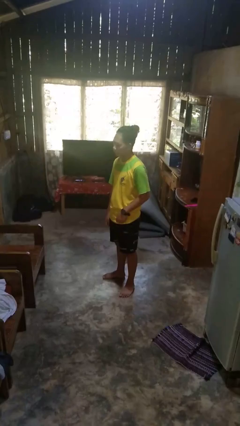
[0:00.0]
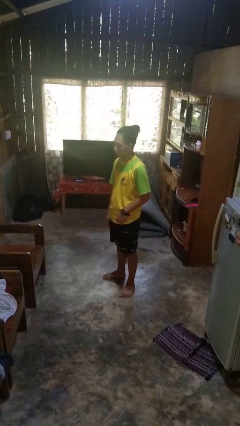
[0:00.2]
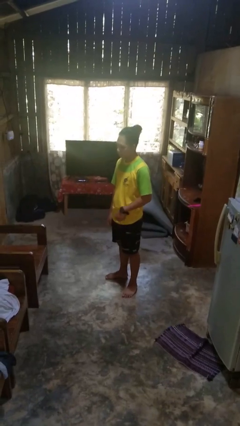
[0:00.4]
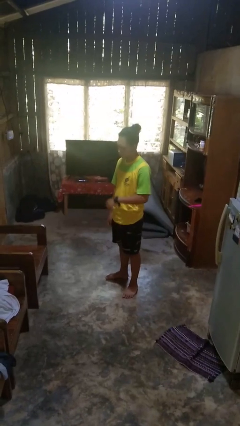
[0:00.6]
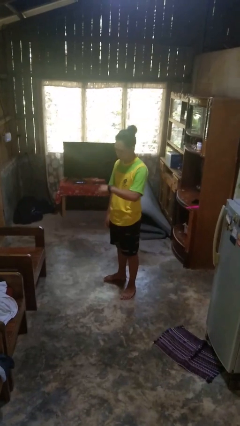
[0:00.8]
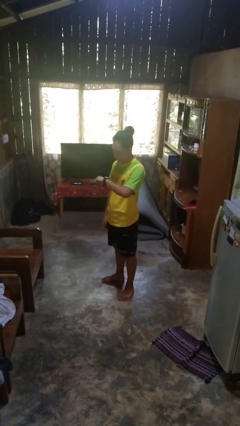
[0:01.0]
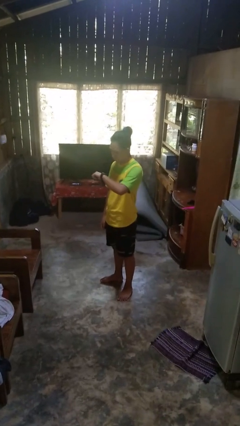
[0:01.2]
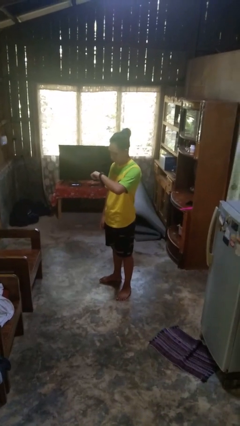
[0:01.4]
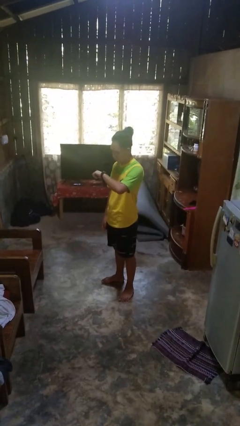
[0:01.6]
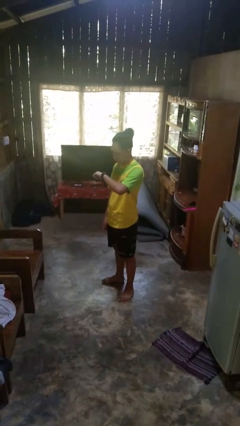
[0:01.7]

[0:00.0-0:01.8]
person looks at wristwatch

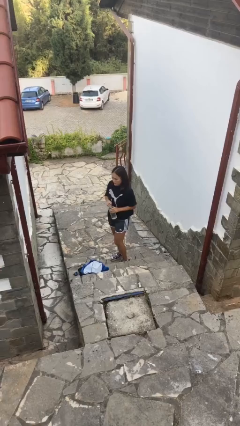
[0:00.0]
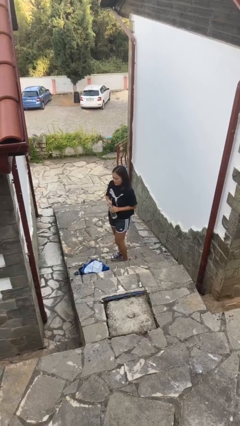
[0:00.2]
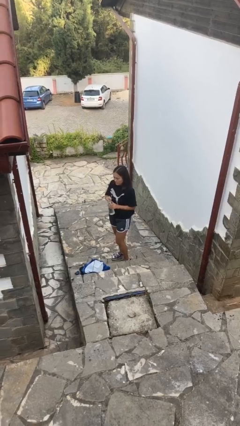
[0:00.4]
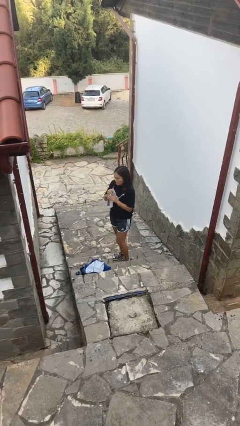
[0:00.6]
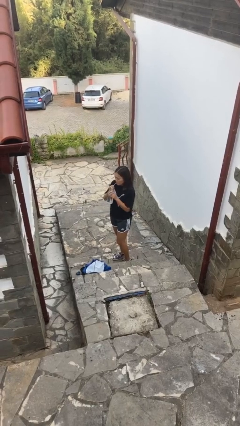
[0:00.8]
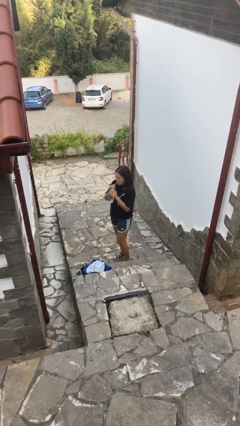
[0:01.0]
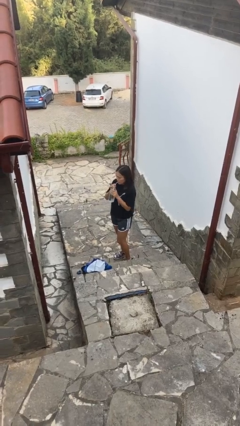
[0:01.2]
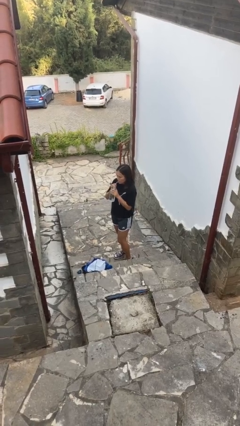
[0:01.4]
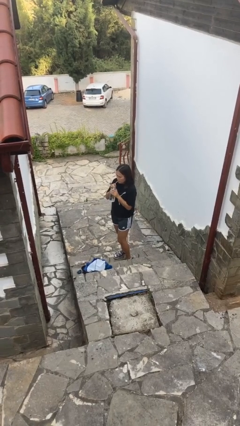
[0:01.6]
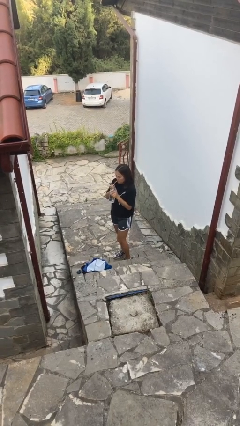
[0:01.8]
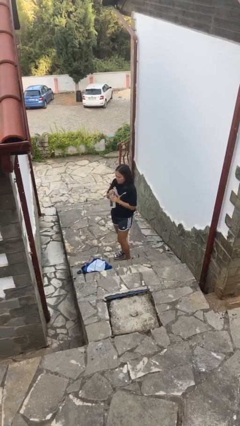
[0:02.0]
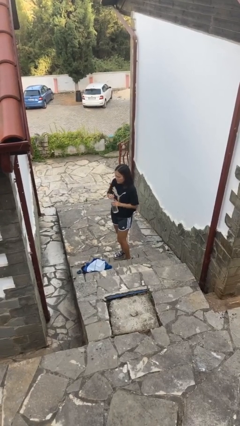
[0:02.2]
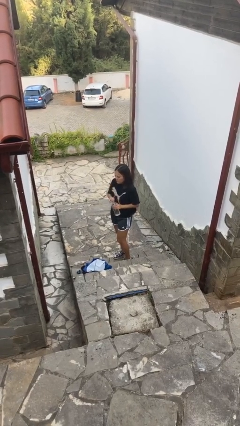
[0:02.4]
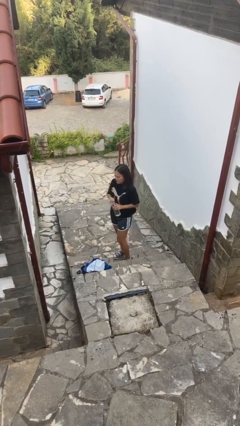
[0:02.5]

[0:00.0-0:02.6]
person drinks from straw

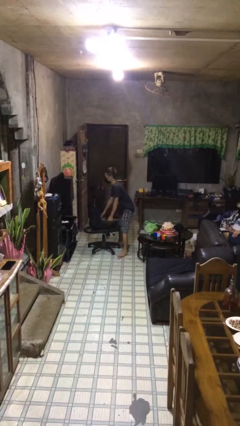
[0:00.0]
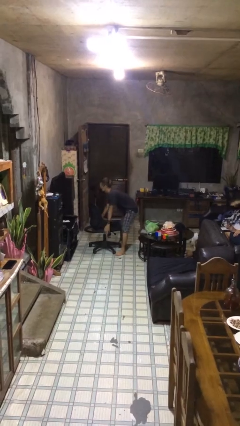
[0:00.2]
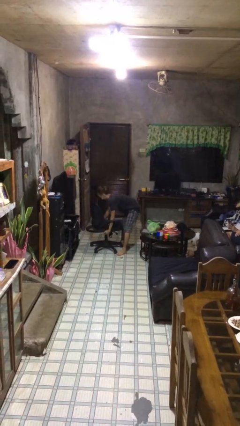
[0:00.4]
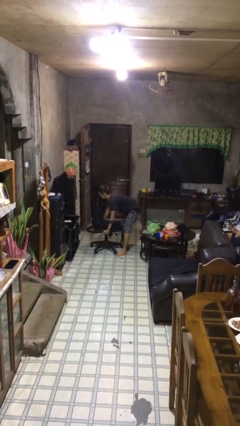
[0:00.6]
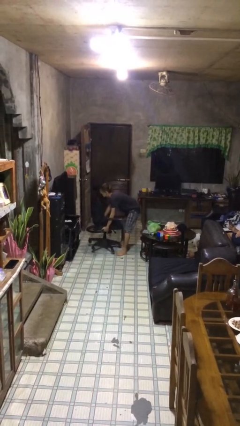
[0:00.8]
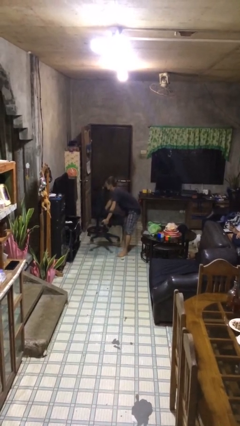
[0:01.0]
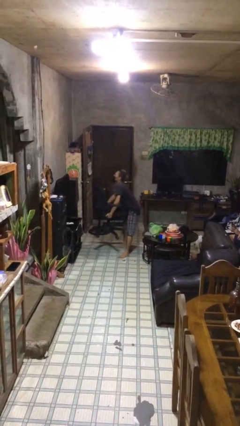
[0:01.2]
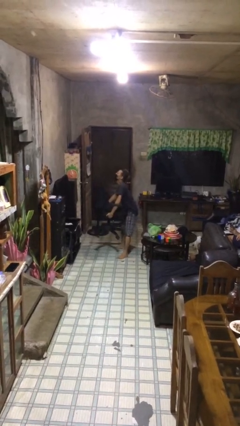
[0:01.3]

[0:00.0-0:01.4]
person picks up object from floor

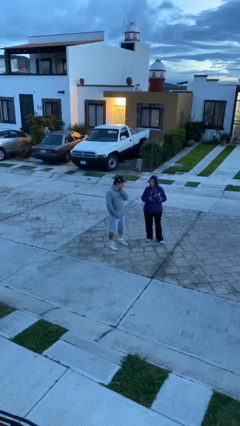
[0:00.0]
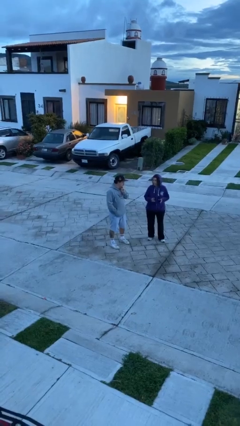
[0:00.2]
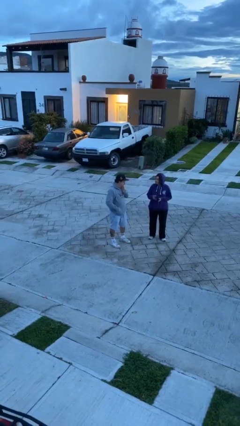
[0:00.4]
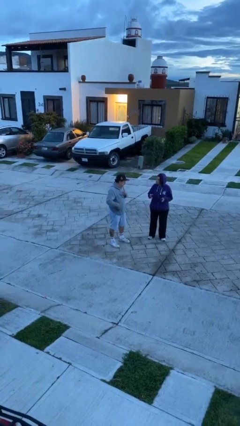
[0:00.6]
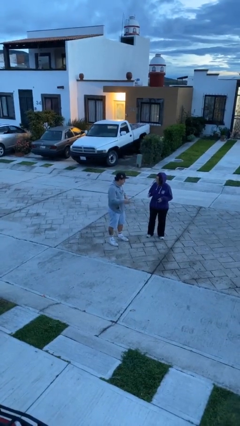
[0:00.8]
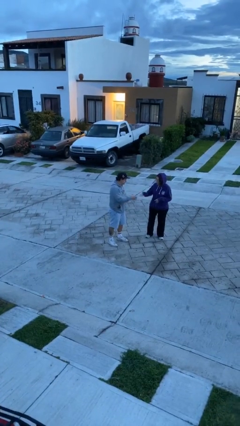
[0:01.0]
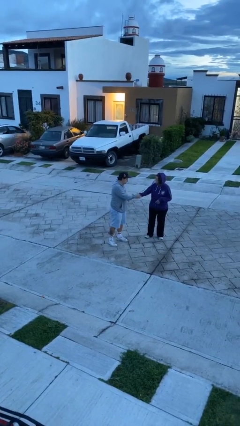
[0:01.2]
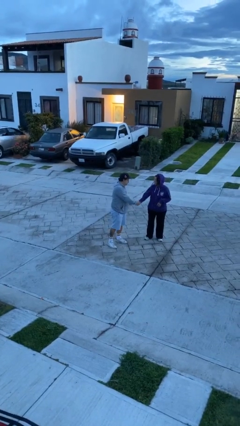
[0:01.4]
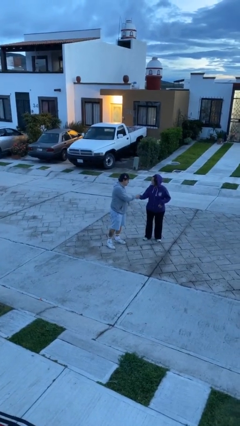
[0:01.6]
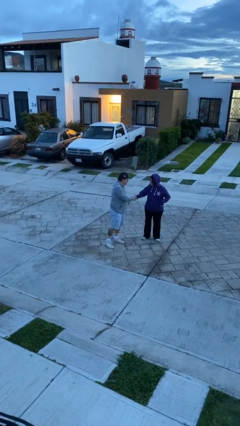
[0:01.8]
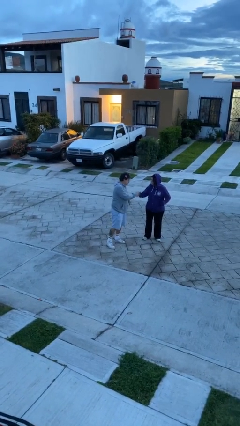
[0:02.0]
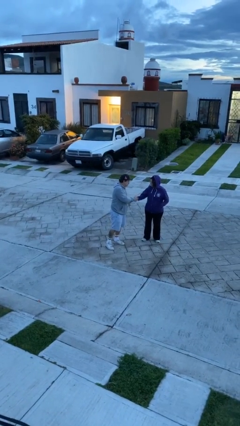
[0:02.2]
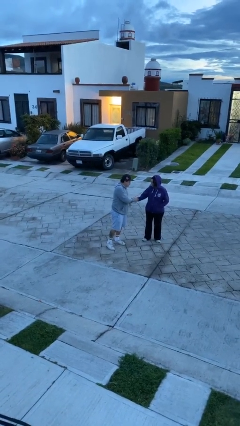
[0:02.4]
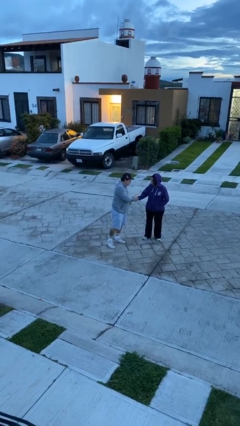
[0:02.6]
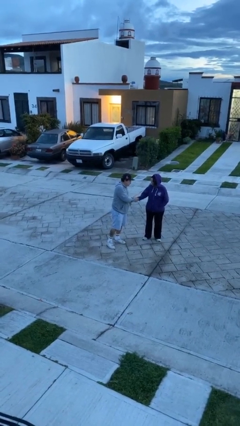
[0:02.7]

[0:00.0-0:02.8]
person shakes hand

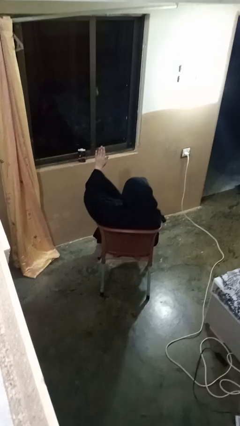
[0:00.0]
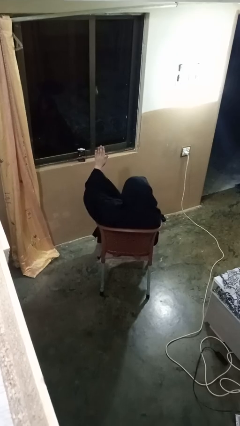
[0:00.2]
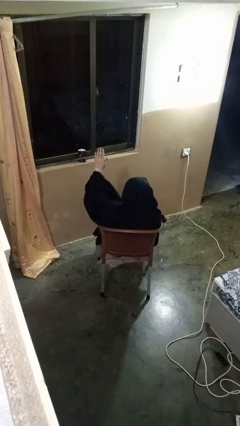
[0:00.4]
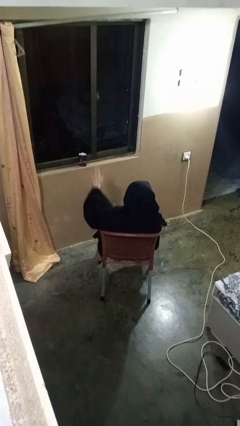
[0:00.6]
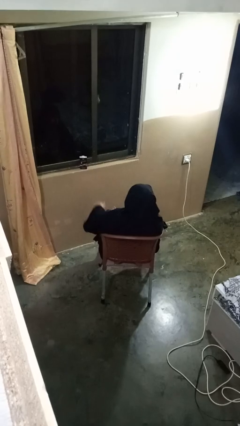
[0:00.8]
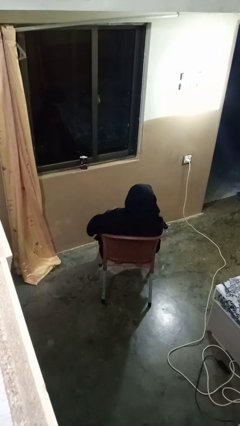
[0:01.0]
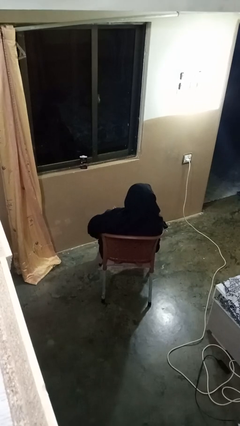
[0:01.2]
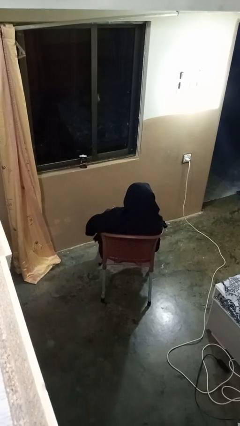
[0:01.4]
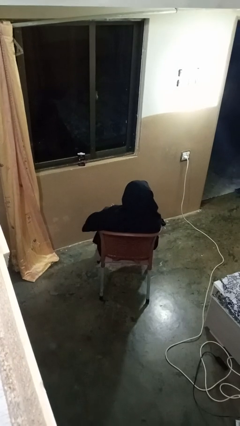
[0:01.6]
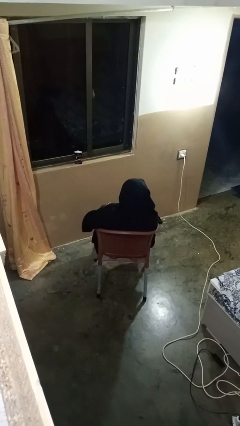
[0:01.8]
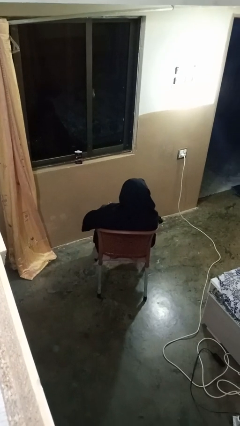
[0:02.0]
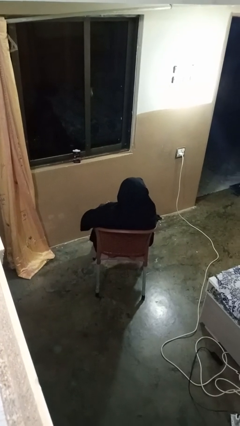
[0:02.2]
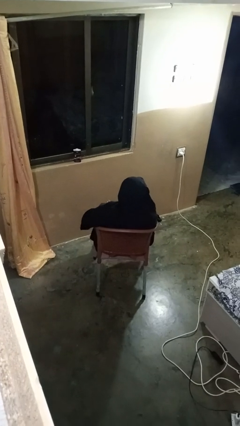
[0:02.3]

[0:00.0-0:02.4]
person gestures lower hand

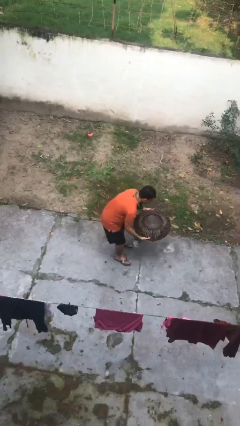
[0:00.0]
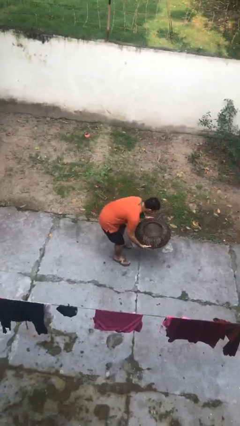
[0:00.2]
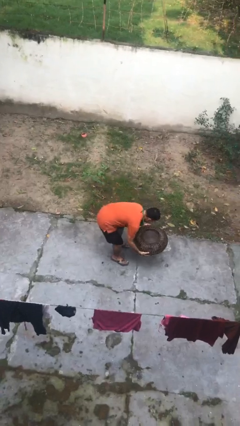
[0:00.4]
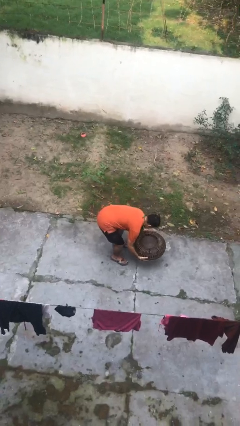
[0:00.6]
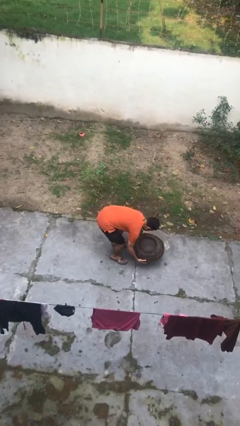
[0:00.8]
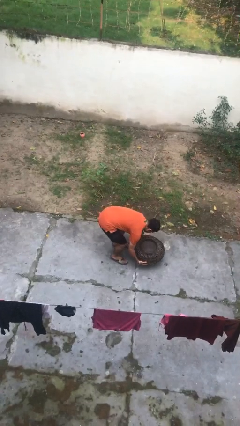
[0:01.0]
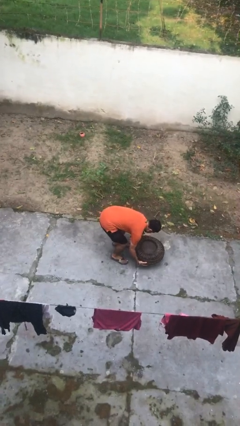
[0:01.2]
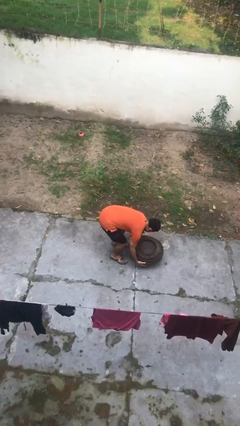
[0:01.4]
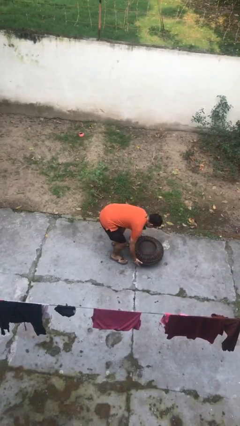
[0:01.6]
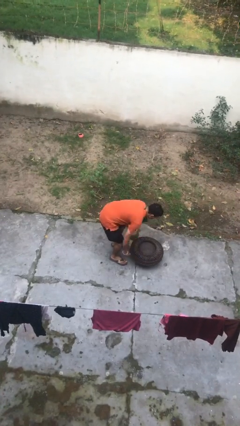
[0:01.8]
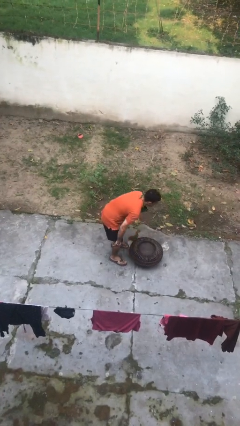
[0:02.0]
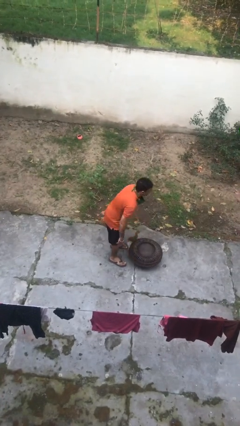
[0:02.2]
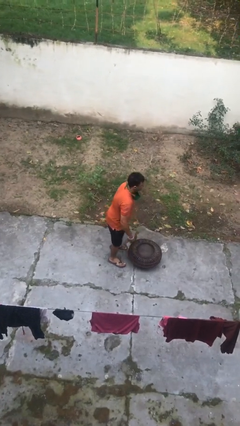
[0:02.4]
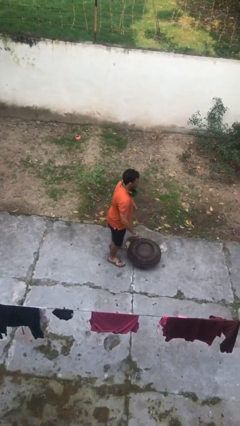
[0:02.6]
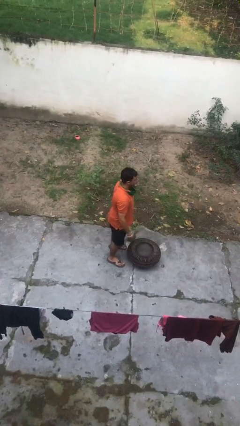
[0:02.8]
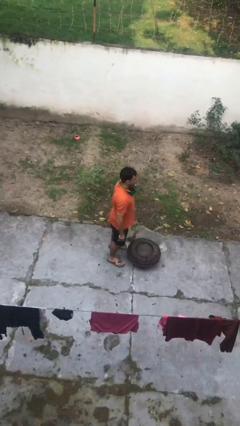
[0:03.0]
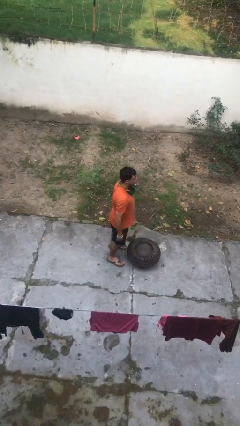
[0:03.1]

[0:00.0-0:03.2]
person puts down object on floor

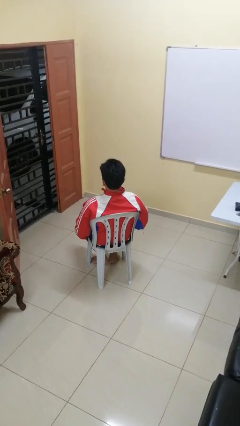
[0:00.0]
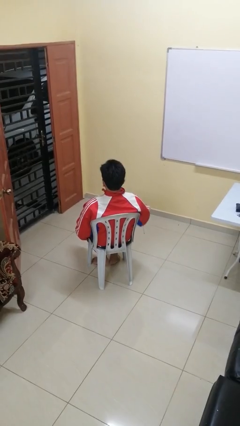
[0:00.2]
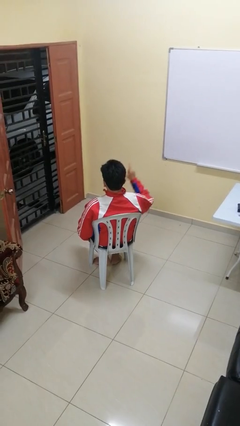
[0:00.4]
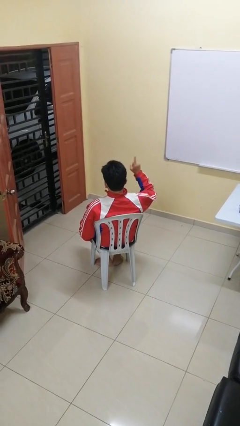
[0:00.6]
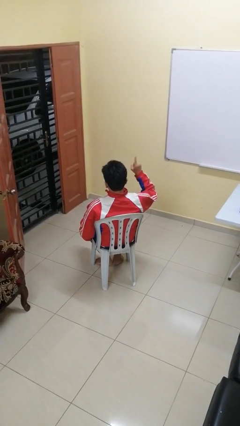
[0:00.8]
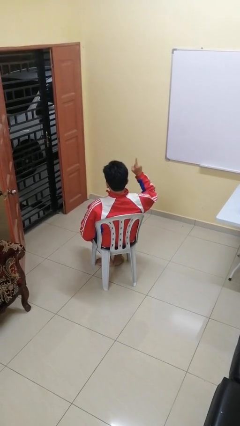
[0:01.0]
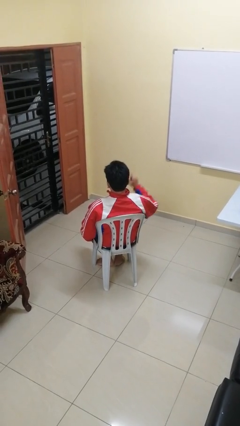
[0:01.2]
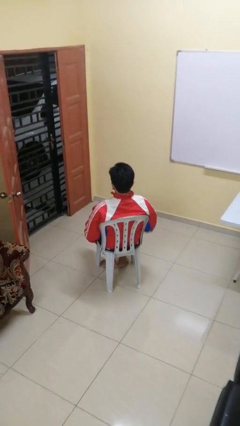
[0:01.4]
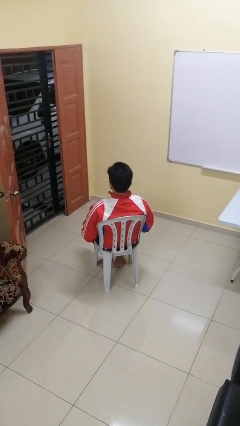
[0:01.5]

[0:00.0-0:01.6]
person gestures number one

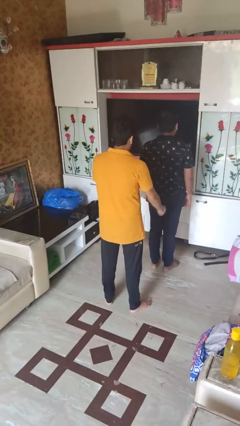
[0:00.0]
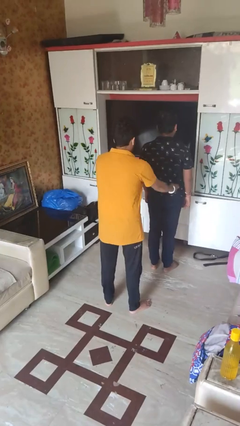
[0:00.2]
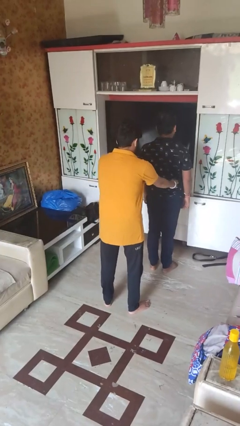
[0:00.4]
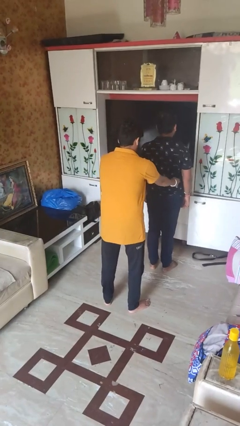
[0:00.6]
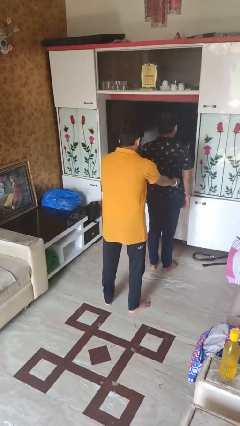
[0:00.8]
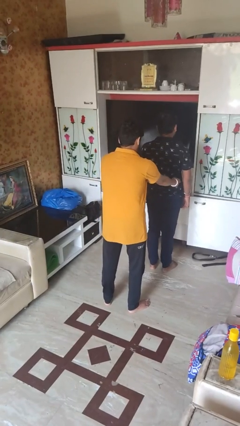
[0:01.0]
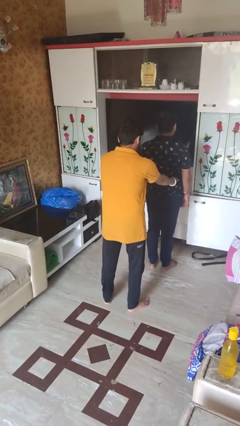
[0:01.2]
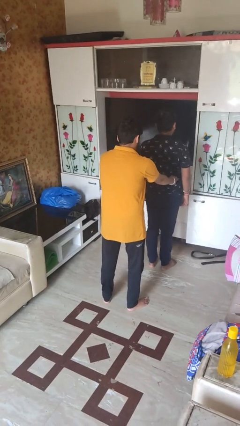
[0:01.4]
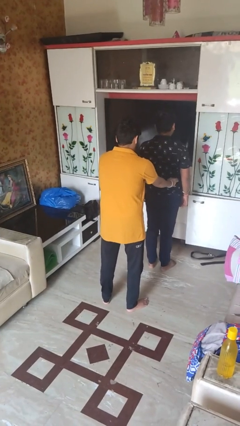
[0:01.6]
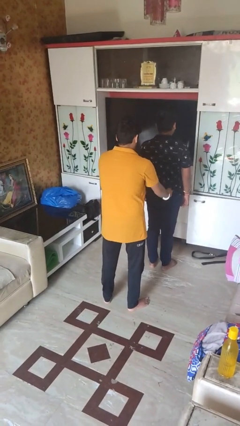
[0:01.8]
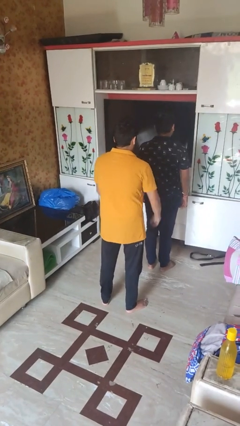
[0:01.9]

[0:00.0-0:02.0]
person tickles person
